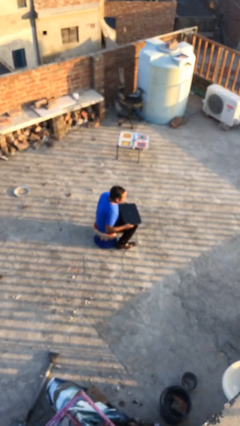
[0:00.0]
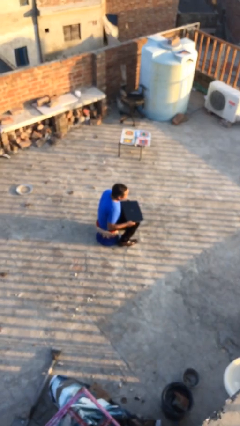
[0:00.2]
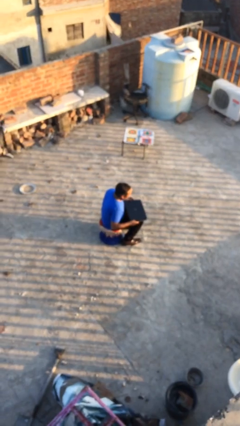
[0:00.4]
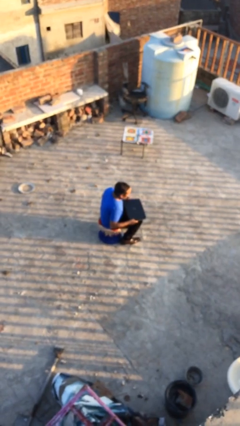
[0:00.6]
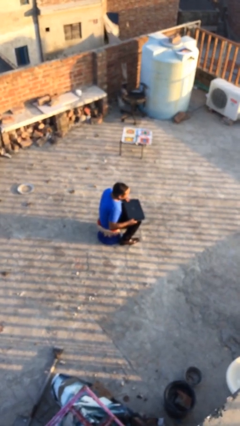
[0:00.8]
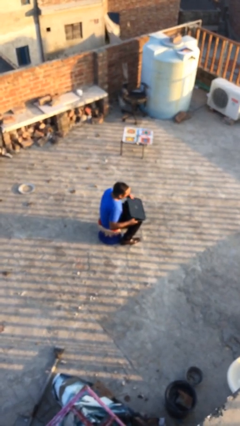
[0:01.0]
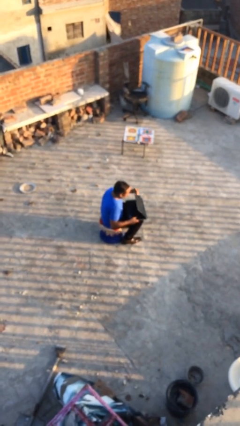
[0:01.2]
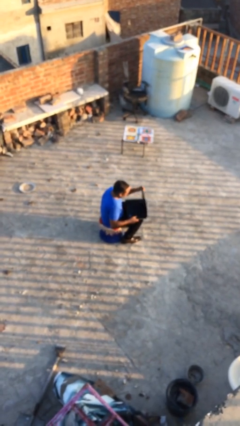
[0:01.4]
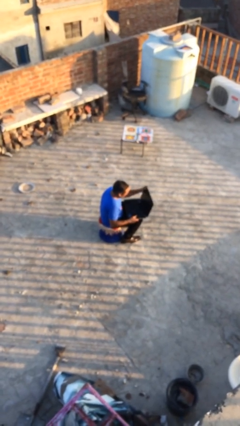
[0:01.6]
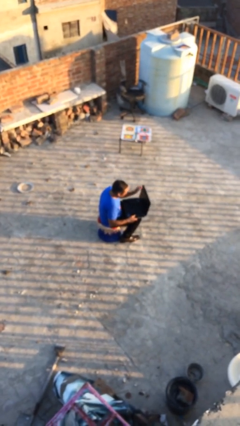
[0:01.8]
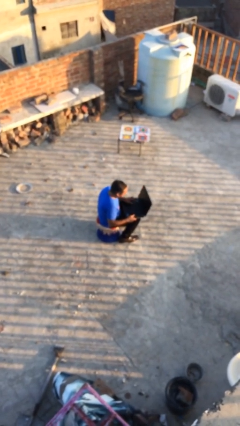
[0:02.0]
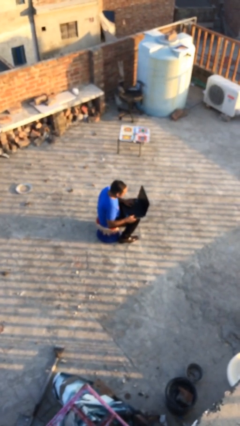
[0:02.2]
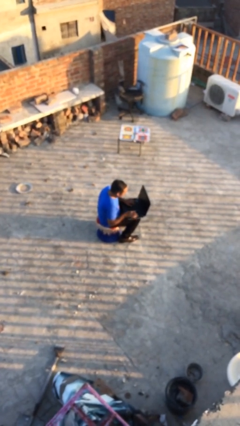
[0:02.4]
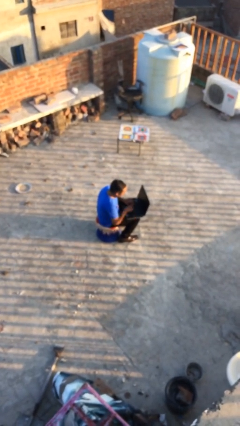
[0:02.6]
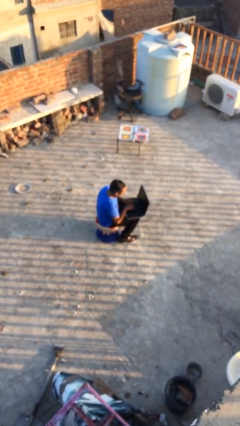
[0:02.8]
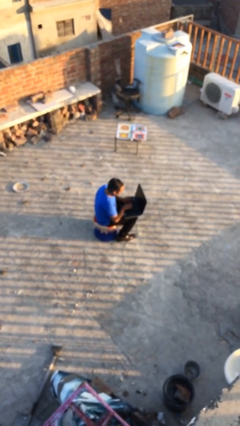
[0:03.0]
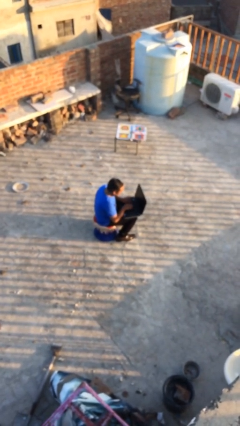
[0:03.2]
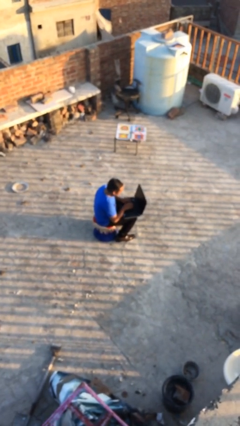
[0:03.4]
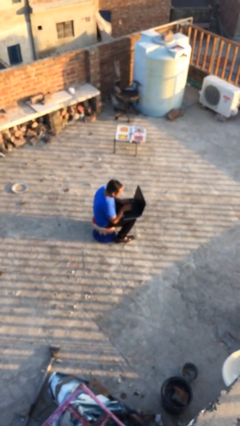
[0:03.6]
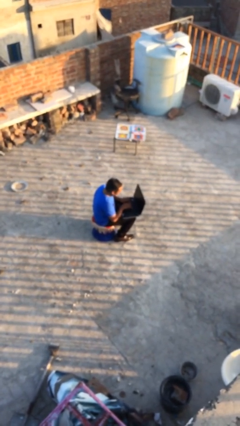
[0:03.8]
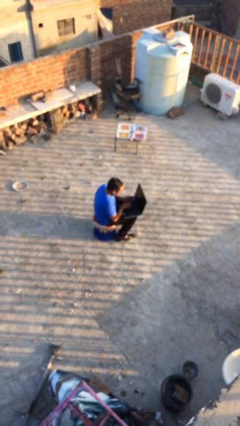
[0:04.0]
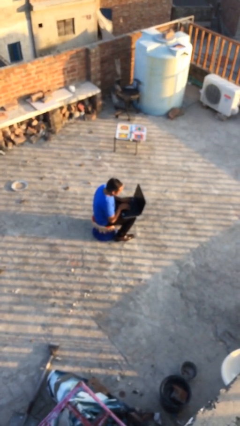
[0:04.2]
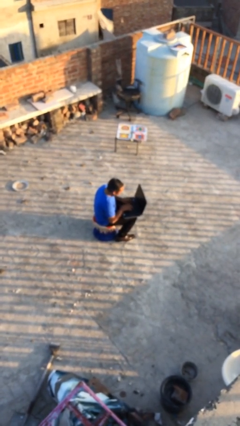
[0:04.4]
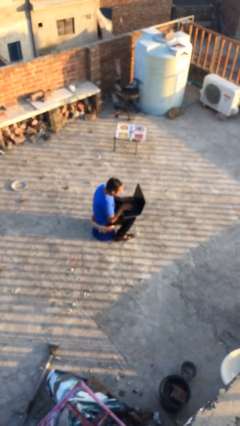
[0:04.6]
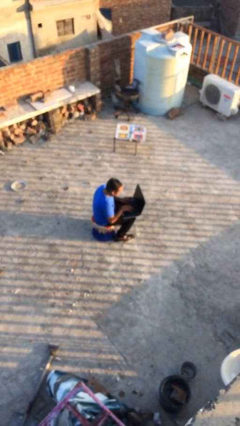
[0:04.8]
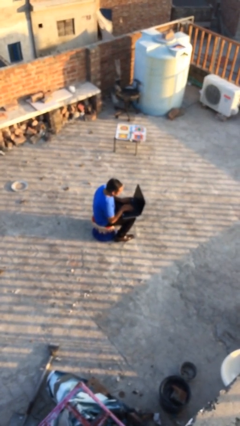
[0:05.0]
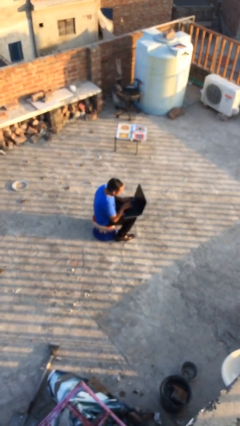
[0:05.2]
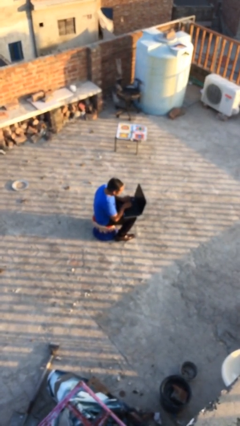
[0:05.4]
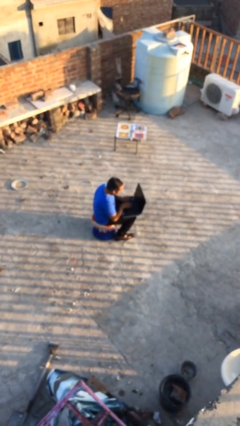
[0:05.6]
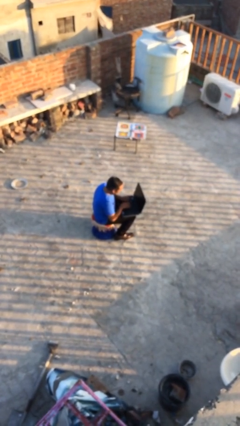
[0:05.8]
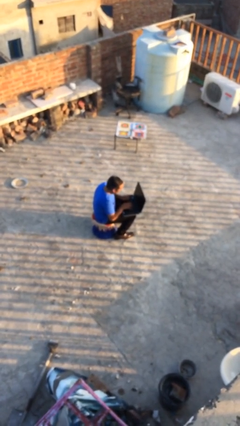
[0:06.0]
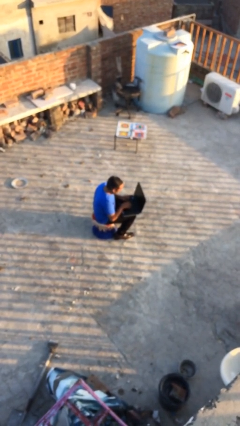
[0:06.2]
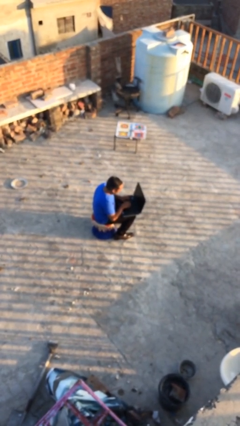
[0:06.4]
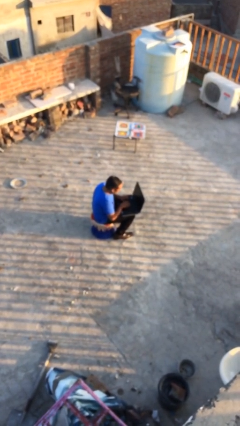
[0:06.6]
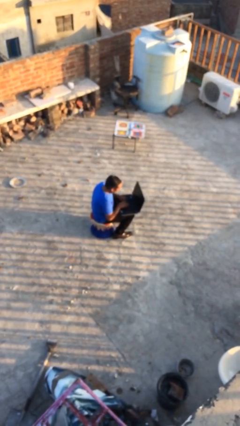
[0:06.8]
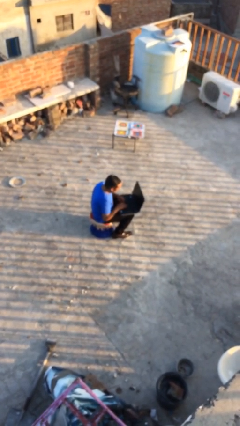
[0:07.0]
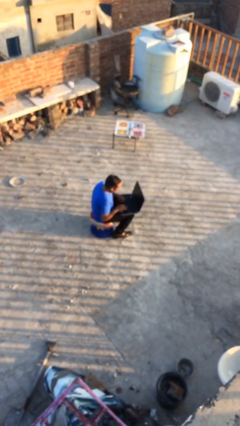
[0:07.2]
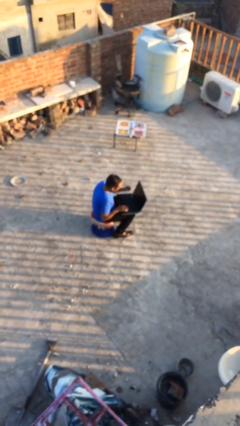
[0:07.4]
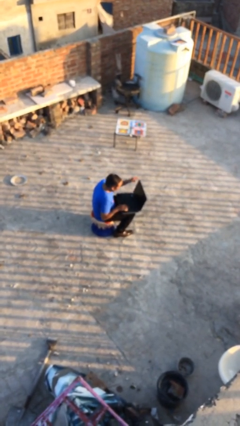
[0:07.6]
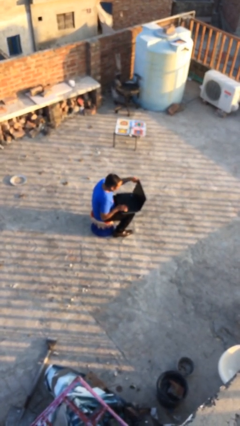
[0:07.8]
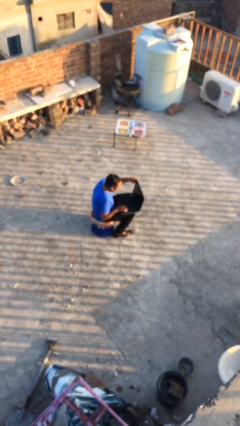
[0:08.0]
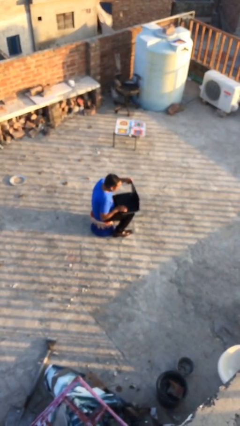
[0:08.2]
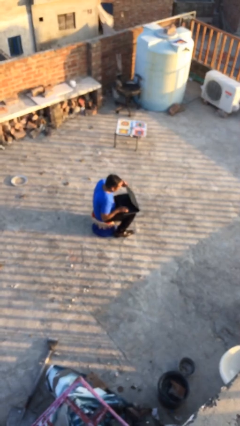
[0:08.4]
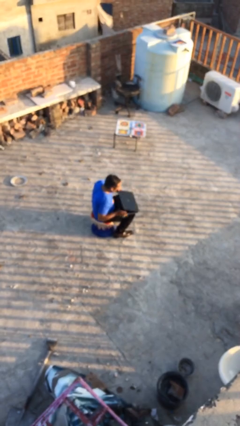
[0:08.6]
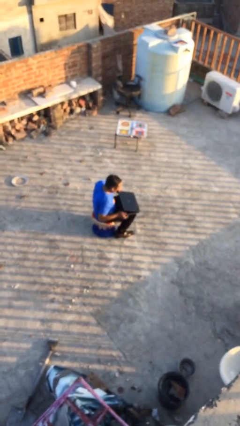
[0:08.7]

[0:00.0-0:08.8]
person interacts with laptop

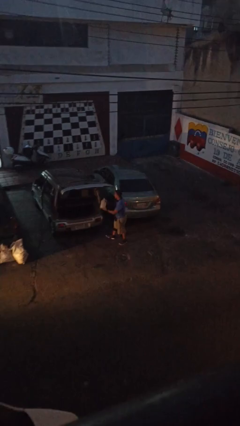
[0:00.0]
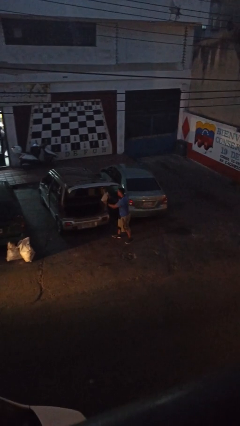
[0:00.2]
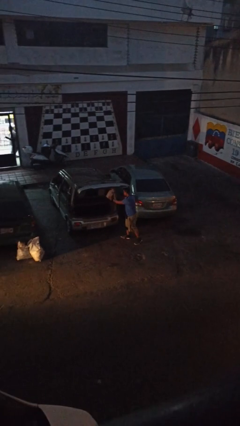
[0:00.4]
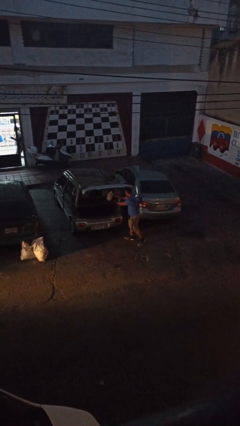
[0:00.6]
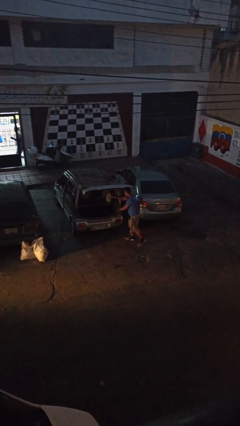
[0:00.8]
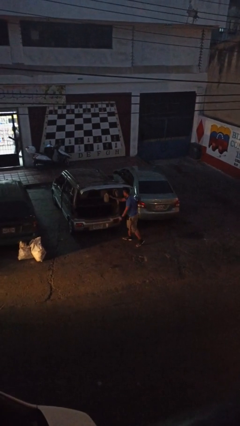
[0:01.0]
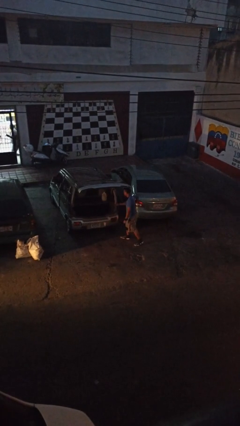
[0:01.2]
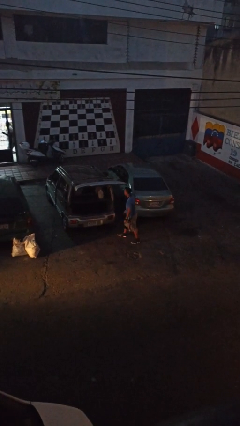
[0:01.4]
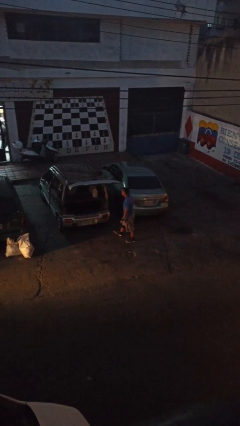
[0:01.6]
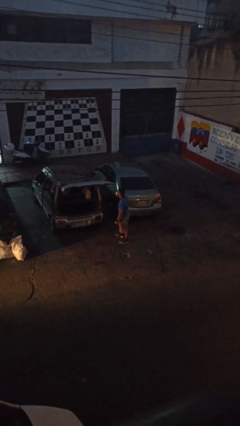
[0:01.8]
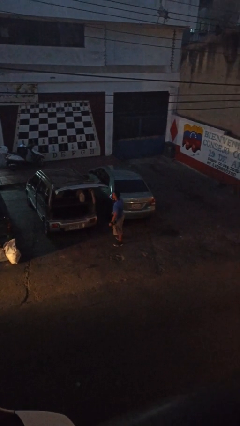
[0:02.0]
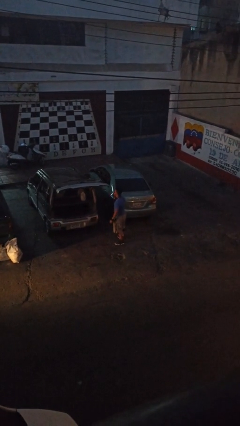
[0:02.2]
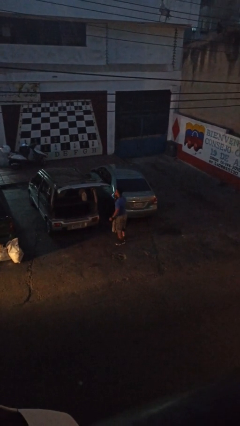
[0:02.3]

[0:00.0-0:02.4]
person loads car

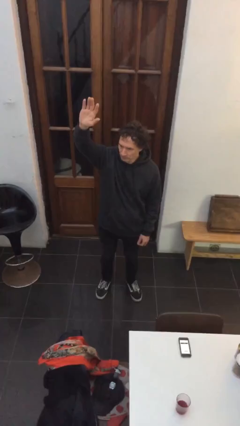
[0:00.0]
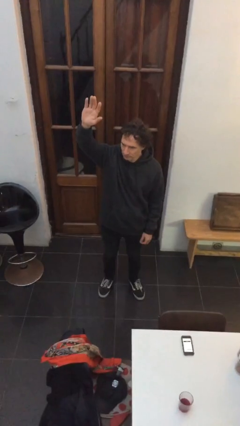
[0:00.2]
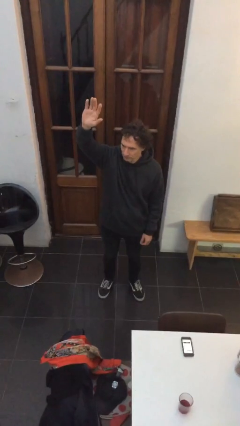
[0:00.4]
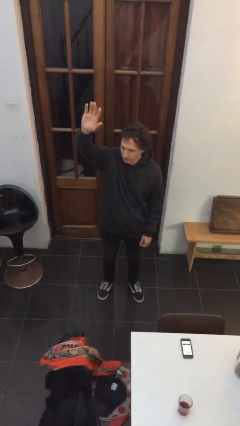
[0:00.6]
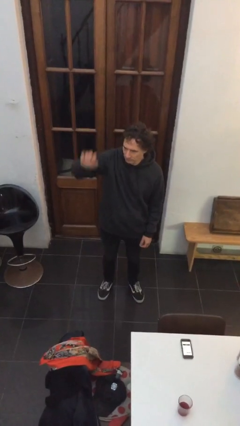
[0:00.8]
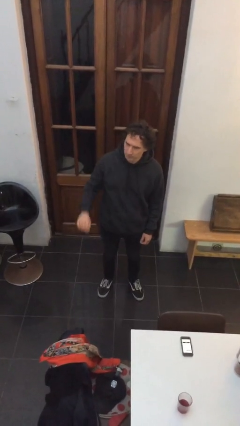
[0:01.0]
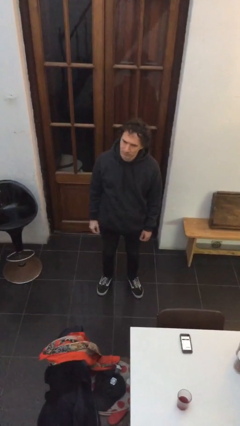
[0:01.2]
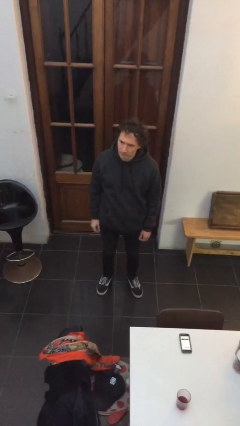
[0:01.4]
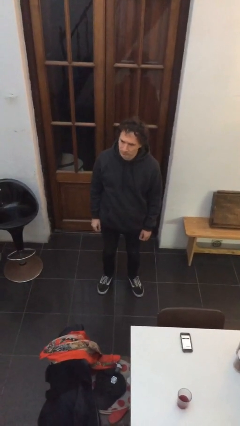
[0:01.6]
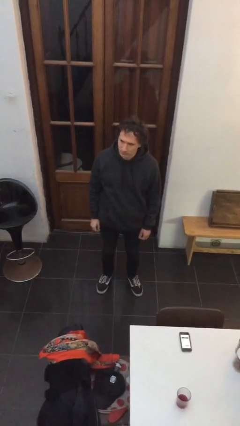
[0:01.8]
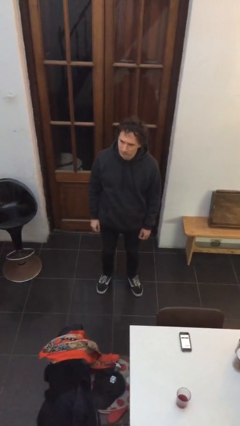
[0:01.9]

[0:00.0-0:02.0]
person gestures lower hand

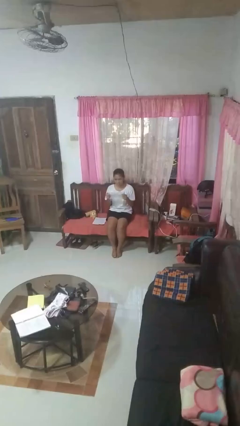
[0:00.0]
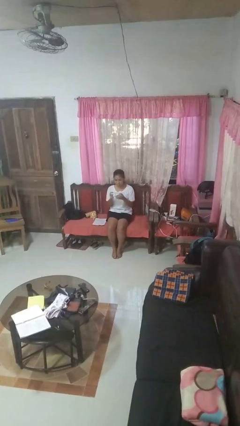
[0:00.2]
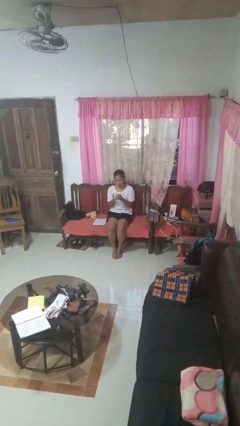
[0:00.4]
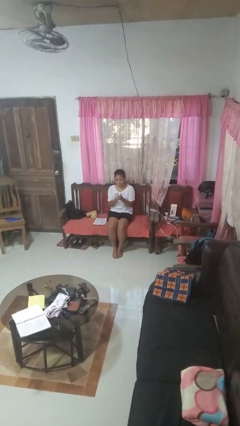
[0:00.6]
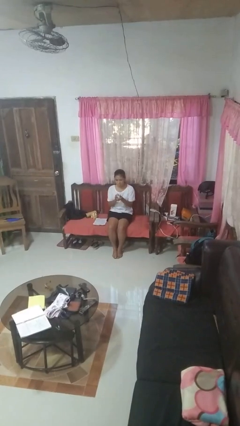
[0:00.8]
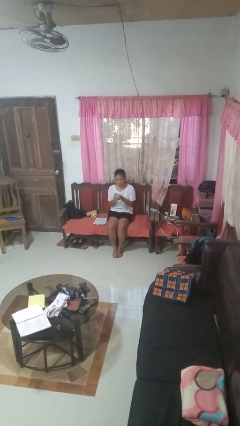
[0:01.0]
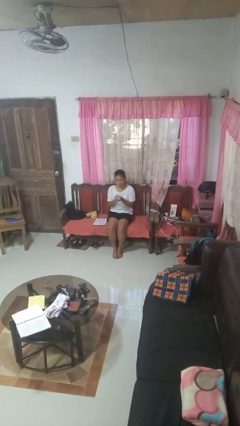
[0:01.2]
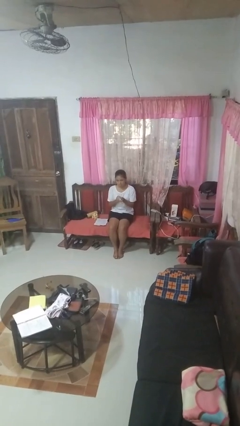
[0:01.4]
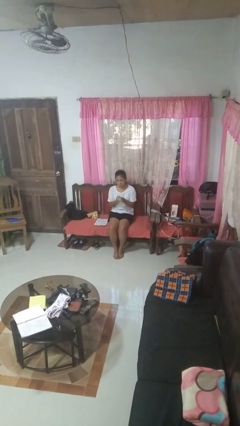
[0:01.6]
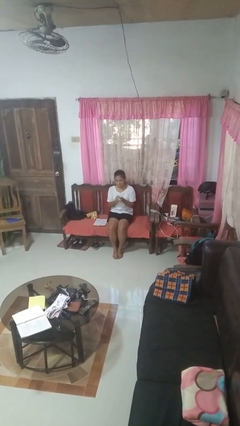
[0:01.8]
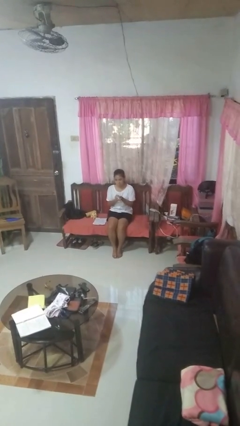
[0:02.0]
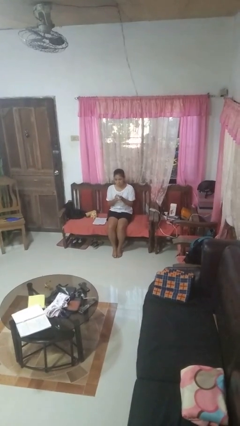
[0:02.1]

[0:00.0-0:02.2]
person crumples paper

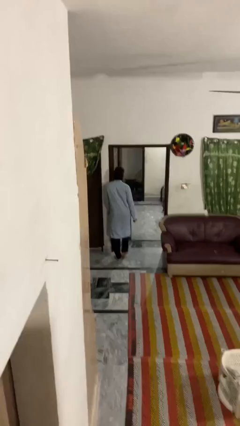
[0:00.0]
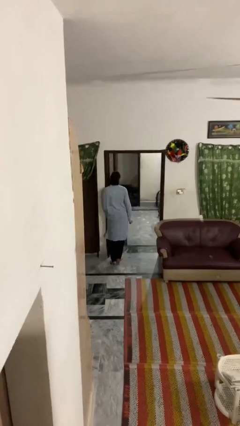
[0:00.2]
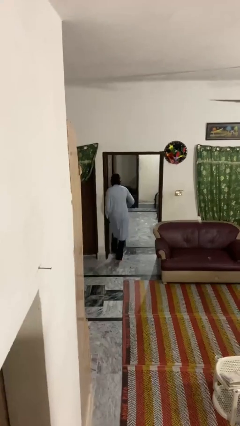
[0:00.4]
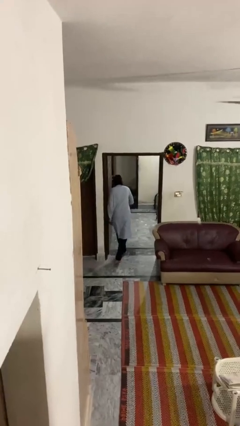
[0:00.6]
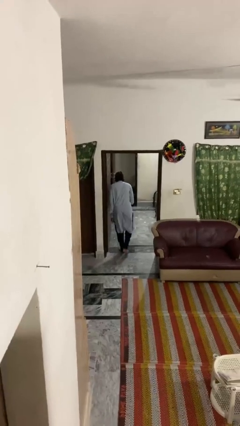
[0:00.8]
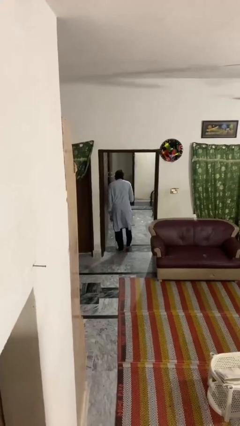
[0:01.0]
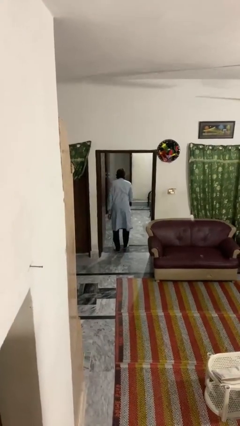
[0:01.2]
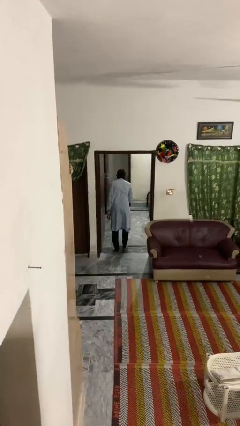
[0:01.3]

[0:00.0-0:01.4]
person bumps into wall

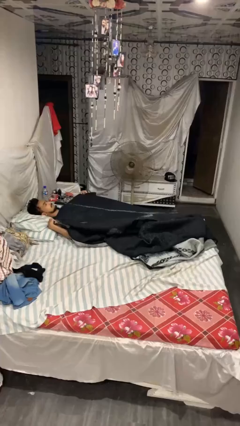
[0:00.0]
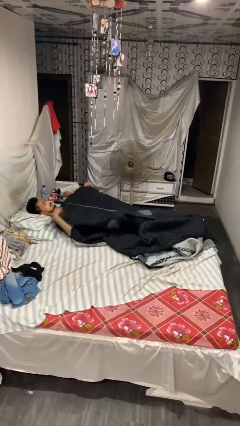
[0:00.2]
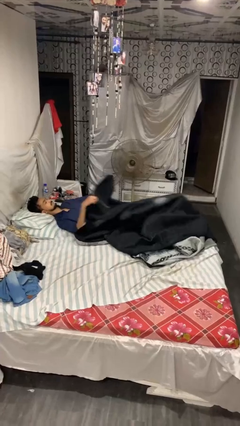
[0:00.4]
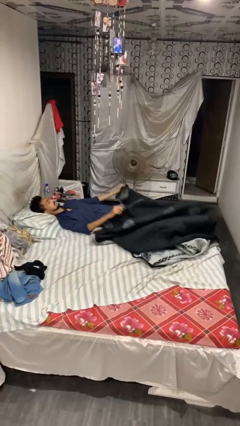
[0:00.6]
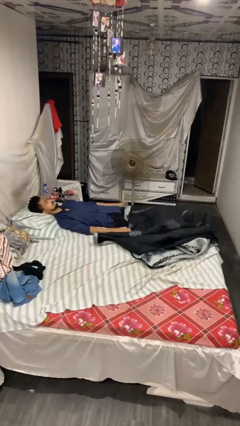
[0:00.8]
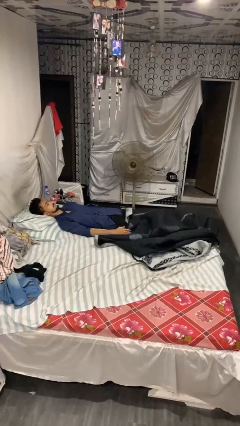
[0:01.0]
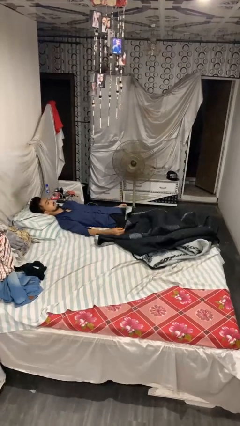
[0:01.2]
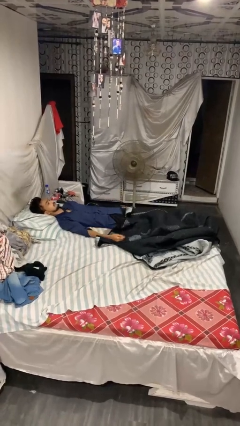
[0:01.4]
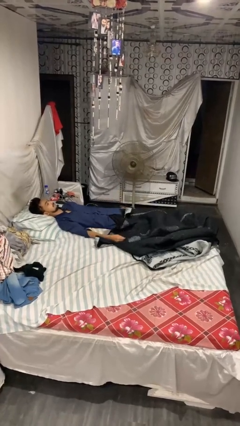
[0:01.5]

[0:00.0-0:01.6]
person uncovers with blanket
